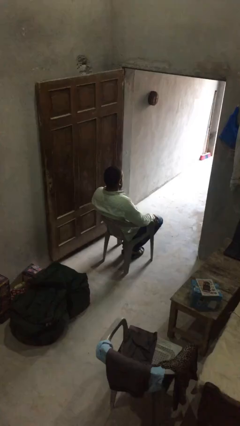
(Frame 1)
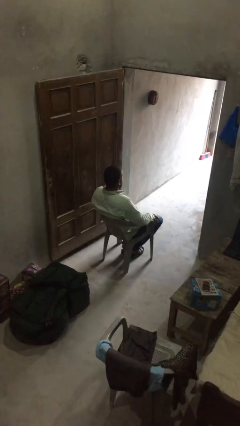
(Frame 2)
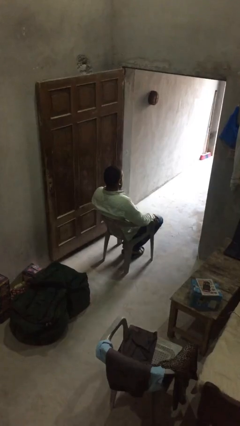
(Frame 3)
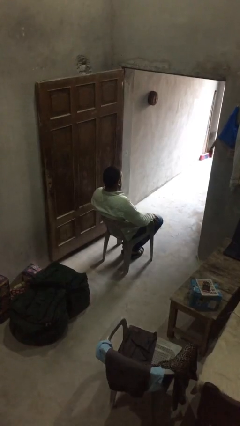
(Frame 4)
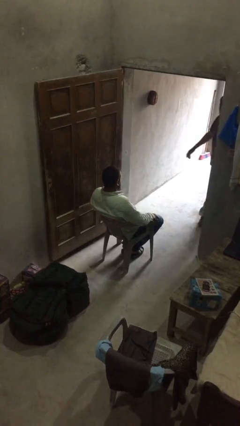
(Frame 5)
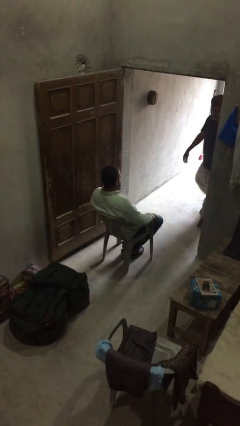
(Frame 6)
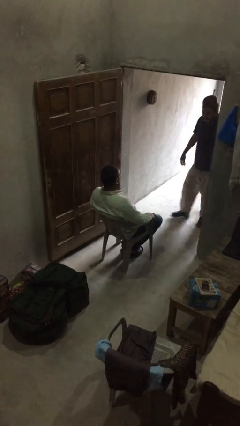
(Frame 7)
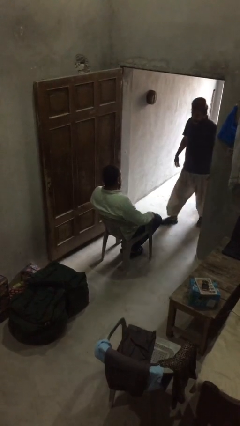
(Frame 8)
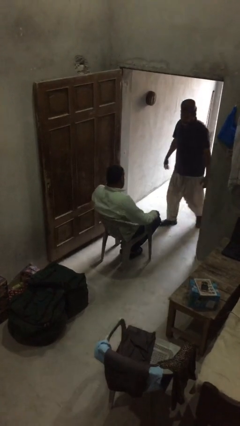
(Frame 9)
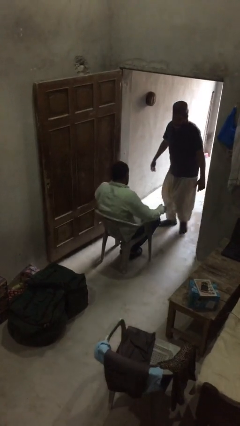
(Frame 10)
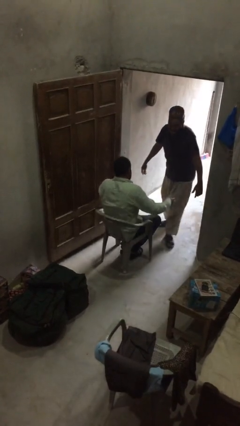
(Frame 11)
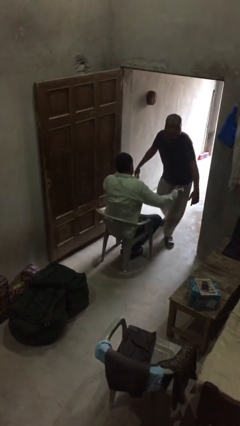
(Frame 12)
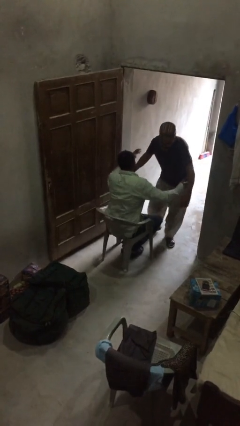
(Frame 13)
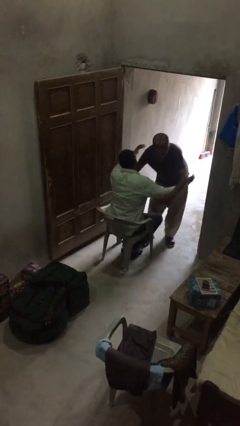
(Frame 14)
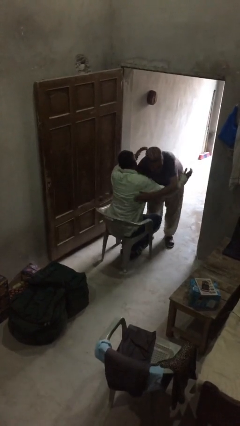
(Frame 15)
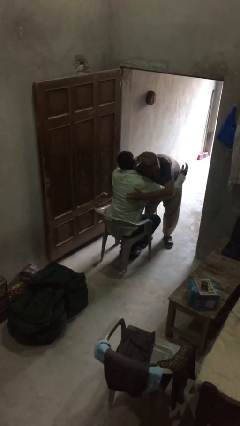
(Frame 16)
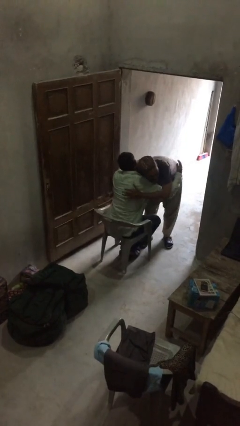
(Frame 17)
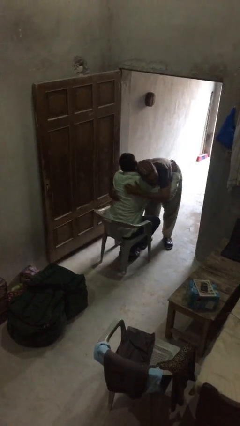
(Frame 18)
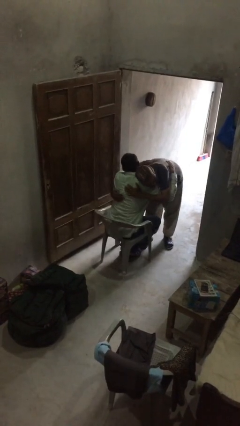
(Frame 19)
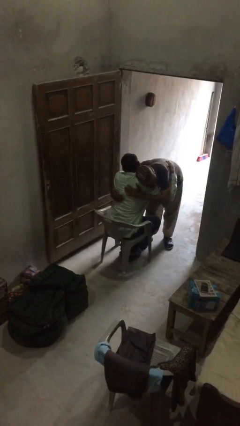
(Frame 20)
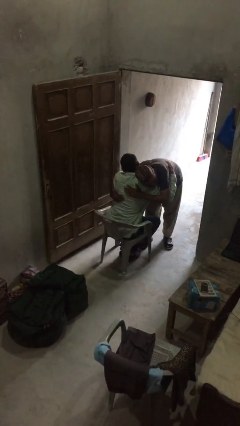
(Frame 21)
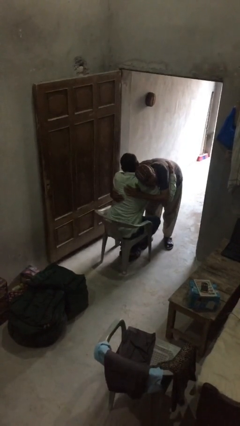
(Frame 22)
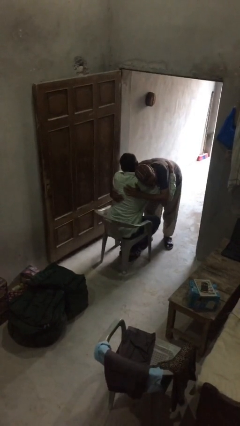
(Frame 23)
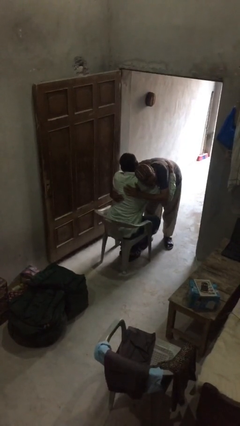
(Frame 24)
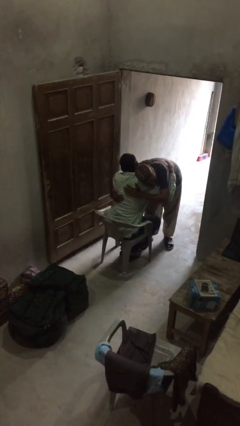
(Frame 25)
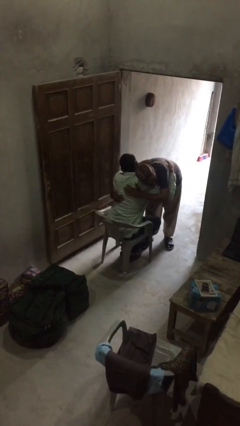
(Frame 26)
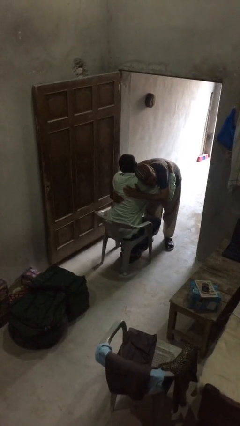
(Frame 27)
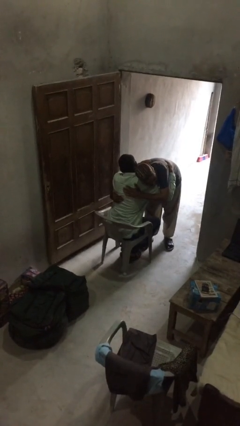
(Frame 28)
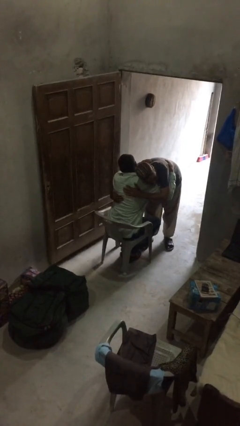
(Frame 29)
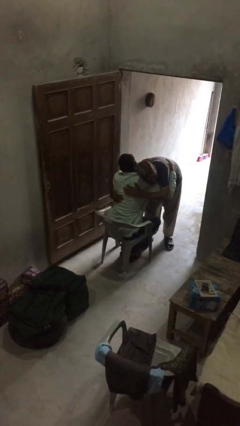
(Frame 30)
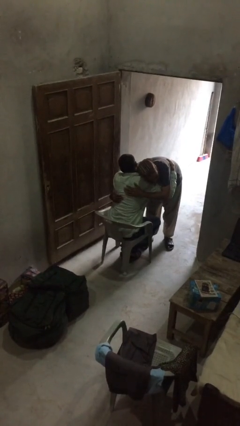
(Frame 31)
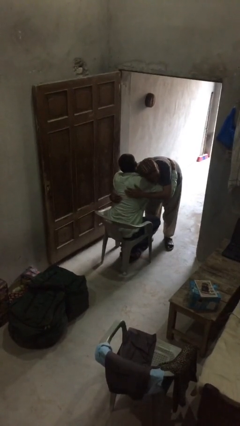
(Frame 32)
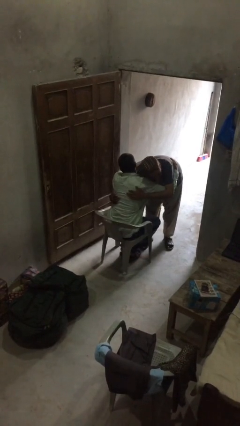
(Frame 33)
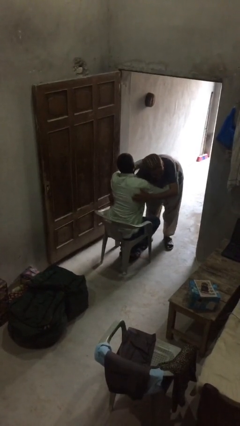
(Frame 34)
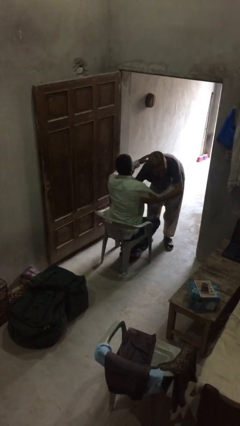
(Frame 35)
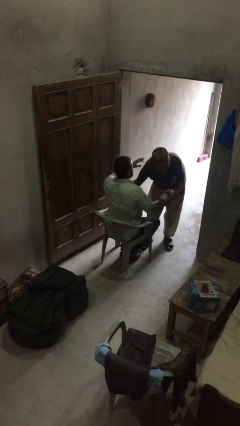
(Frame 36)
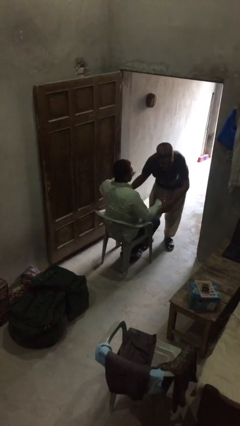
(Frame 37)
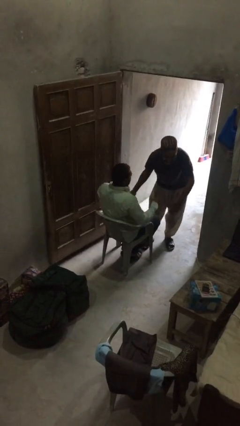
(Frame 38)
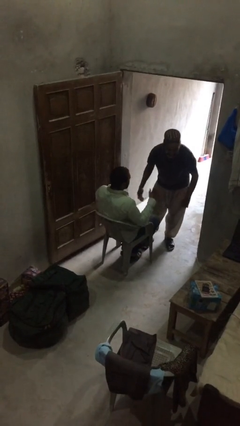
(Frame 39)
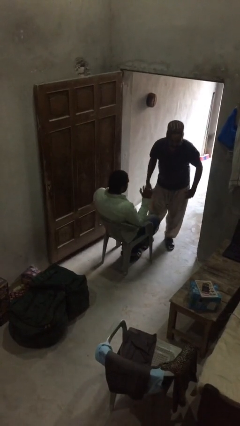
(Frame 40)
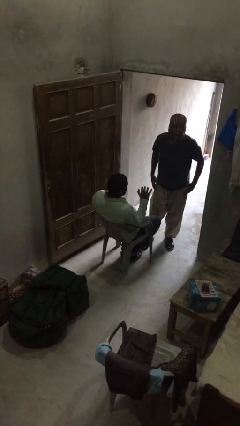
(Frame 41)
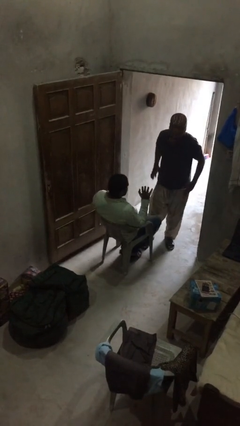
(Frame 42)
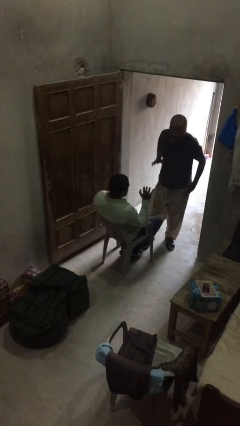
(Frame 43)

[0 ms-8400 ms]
person embraces person

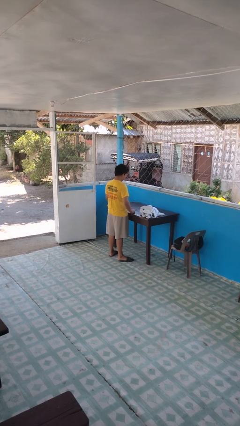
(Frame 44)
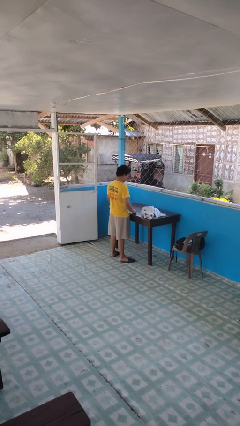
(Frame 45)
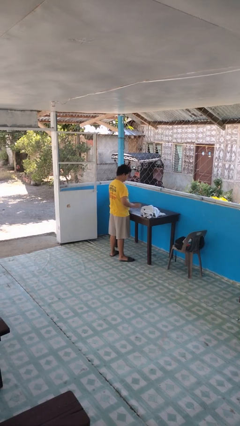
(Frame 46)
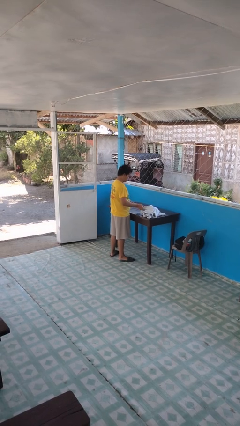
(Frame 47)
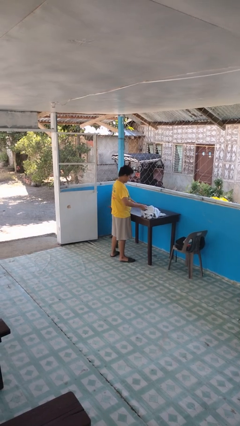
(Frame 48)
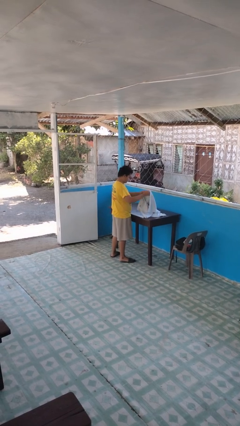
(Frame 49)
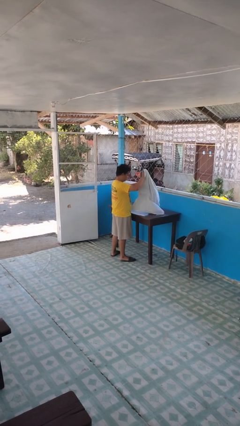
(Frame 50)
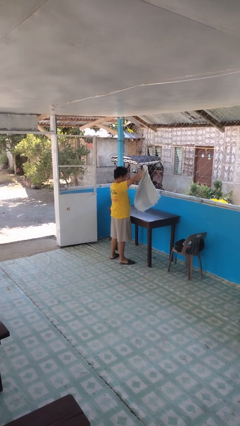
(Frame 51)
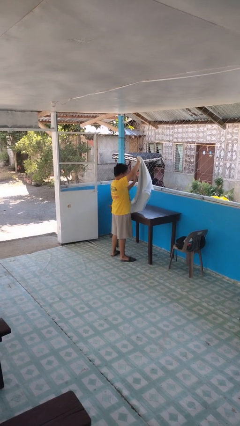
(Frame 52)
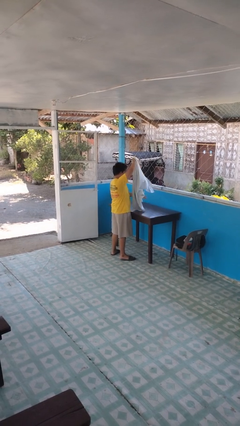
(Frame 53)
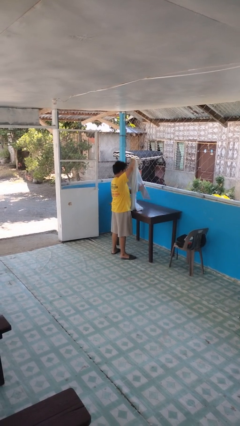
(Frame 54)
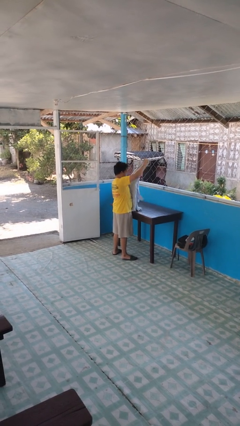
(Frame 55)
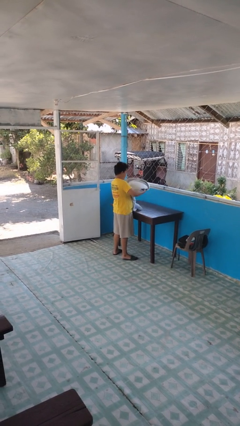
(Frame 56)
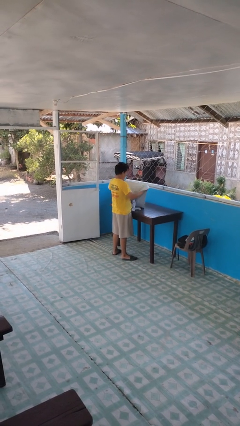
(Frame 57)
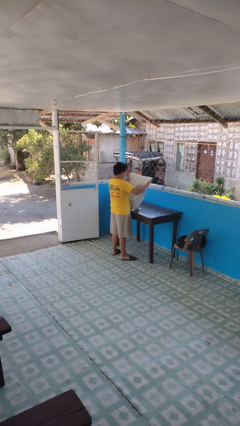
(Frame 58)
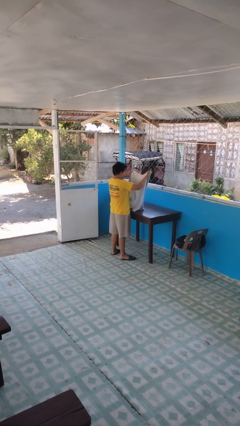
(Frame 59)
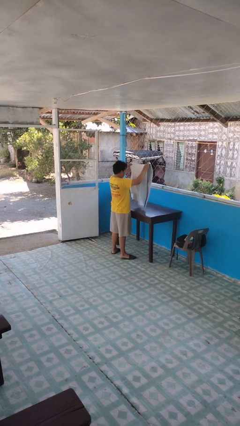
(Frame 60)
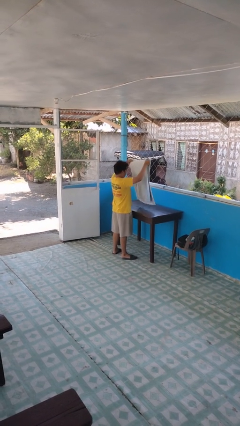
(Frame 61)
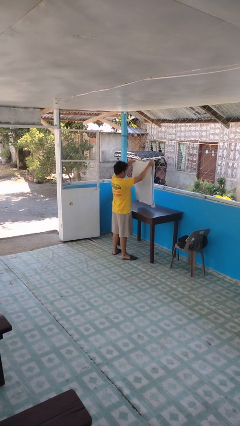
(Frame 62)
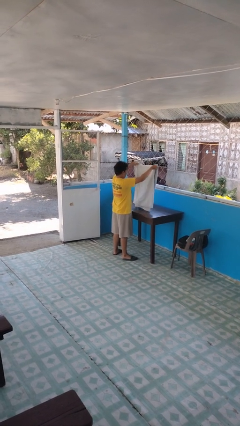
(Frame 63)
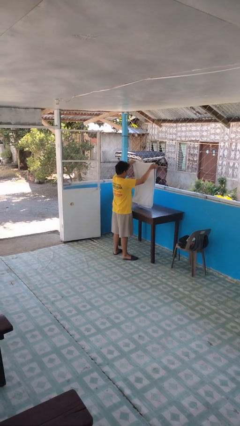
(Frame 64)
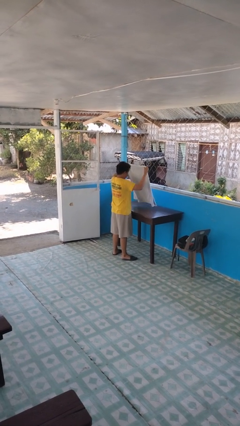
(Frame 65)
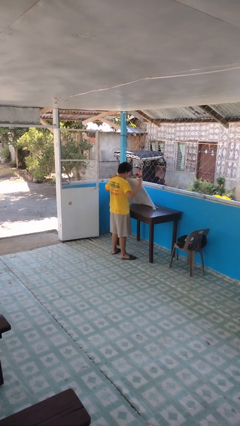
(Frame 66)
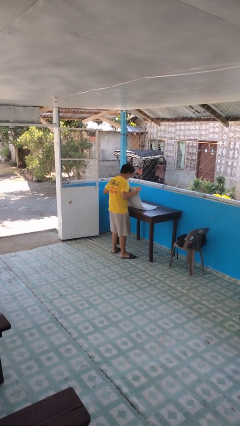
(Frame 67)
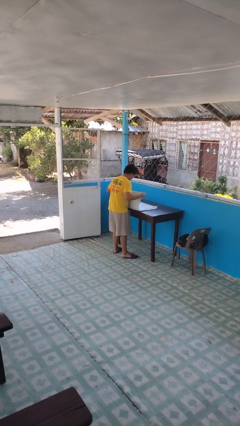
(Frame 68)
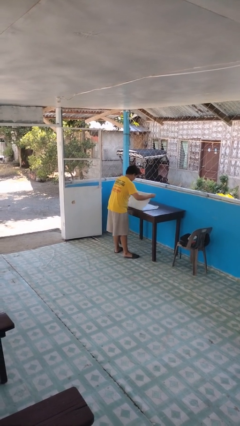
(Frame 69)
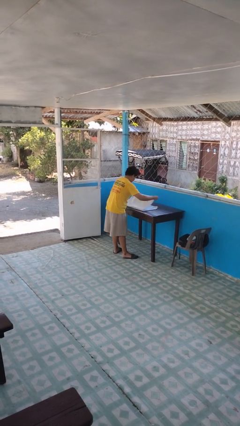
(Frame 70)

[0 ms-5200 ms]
person folds blanket

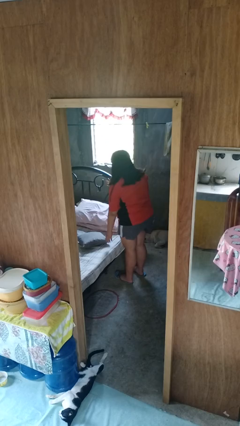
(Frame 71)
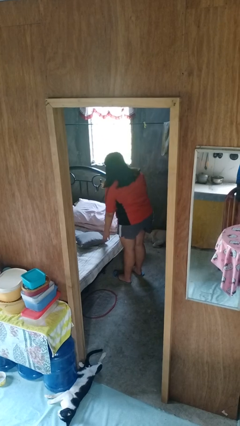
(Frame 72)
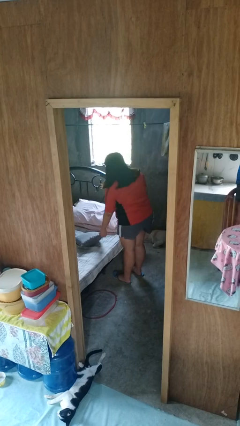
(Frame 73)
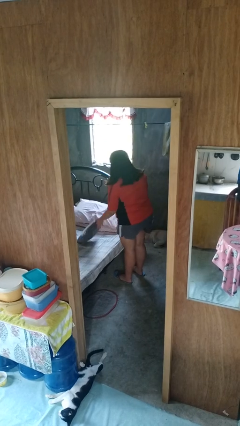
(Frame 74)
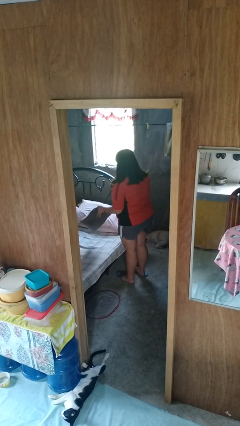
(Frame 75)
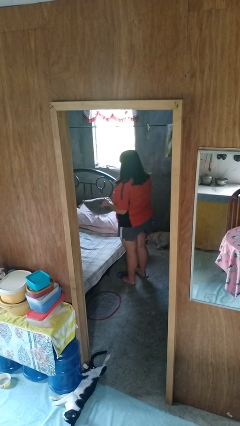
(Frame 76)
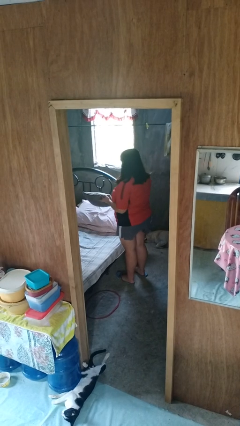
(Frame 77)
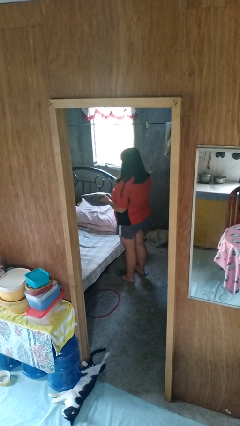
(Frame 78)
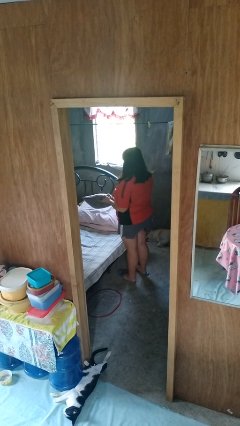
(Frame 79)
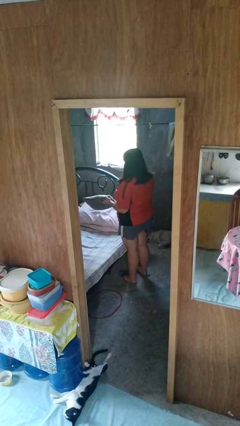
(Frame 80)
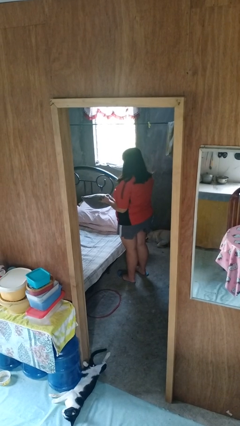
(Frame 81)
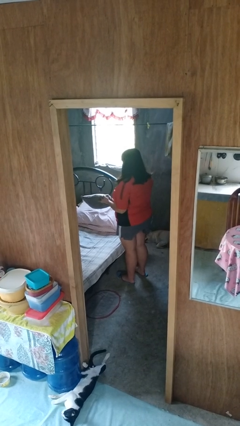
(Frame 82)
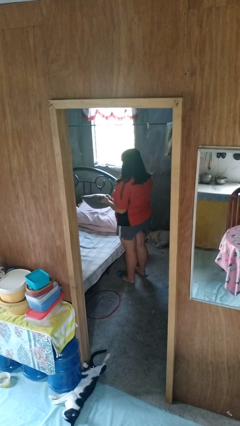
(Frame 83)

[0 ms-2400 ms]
person picks up object from bed

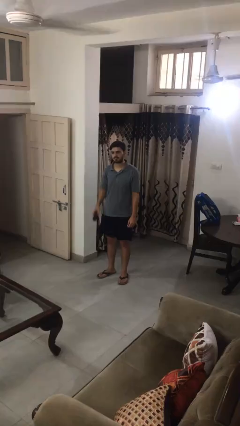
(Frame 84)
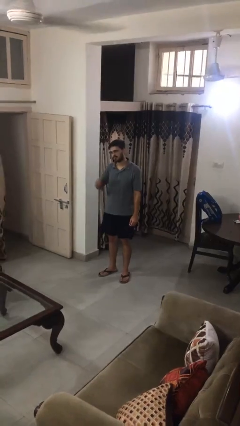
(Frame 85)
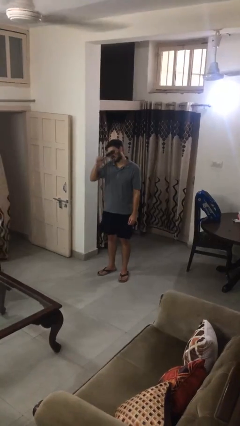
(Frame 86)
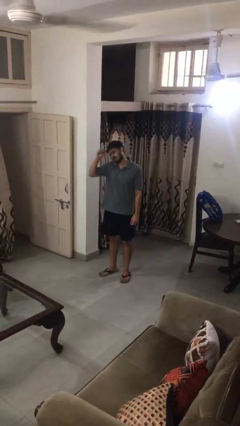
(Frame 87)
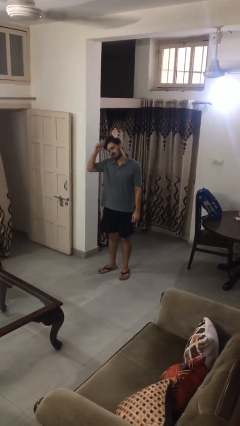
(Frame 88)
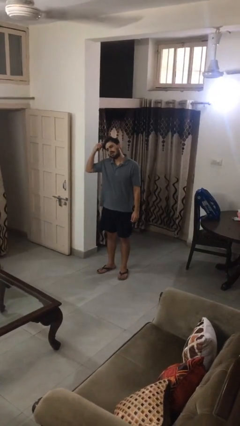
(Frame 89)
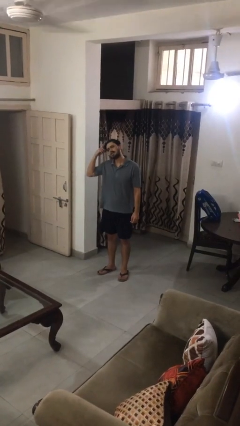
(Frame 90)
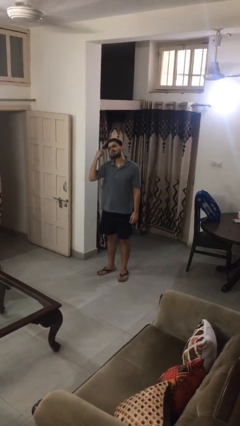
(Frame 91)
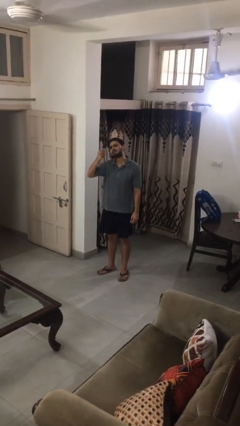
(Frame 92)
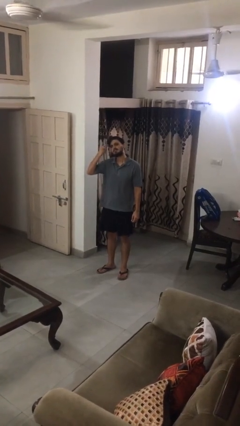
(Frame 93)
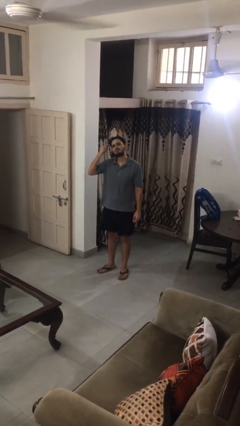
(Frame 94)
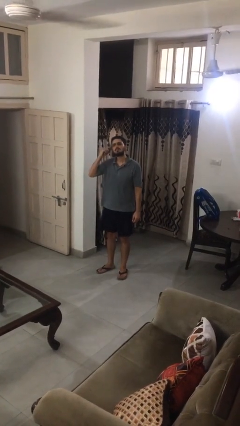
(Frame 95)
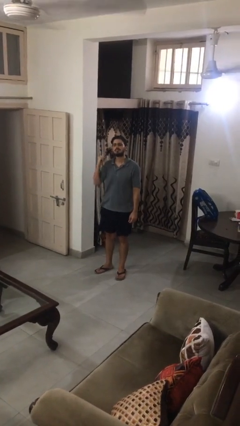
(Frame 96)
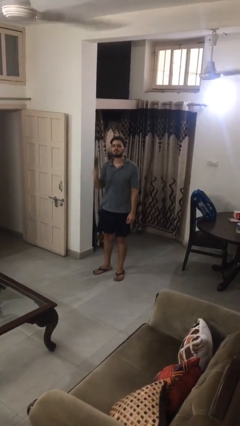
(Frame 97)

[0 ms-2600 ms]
person brushes hair
